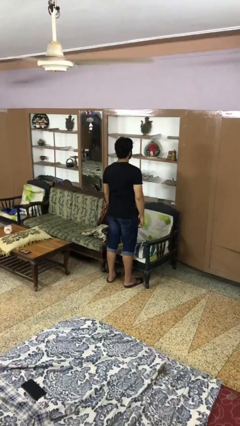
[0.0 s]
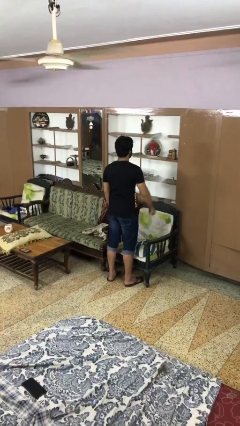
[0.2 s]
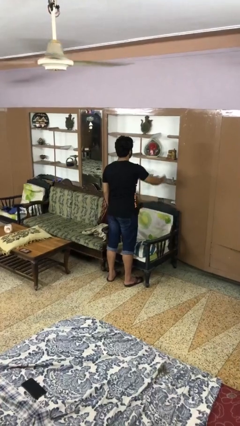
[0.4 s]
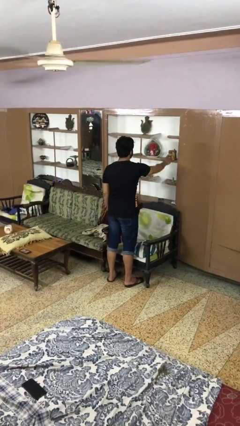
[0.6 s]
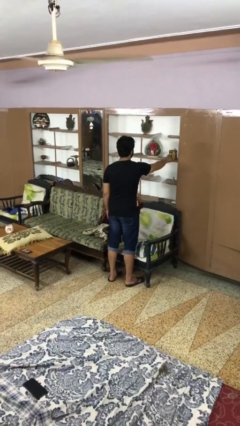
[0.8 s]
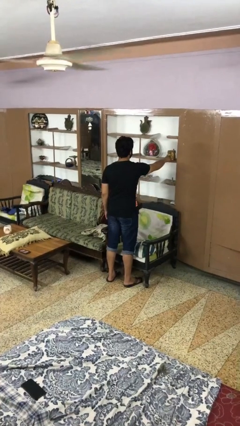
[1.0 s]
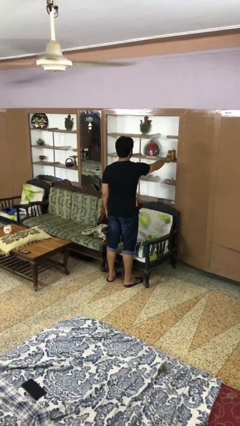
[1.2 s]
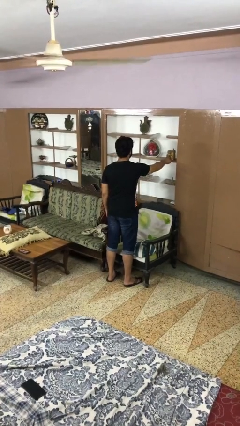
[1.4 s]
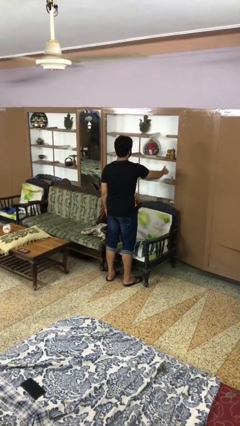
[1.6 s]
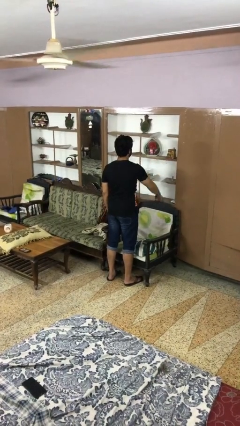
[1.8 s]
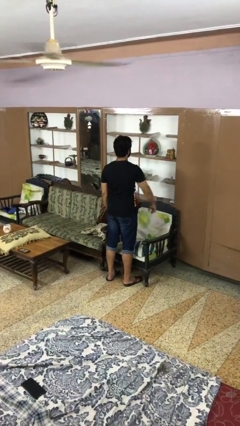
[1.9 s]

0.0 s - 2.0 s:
person taps object with finger

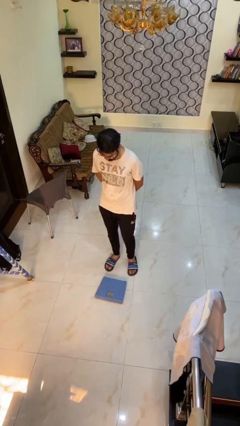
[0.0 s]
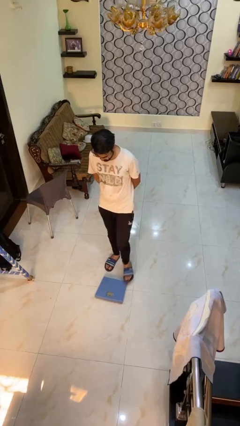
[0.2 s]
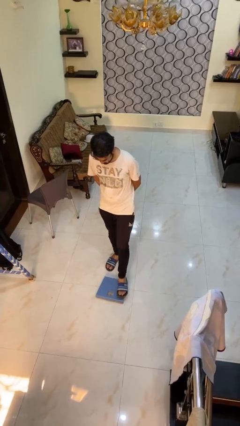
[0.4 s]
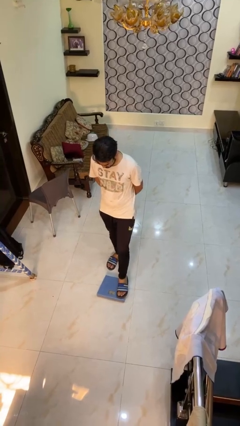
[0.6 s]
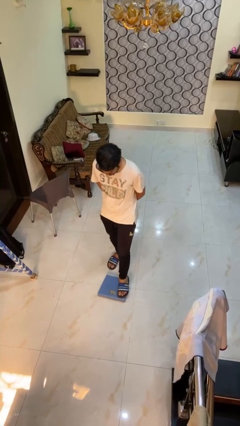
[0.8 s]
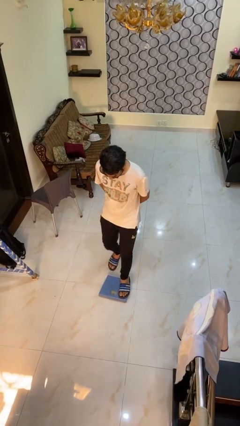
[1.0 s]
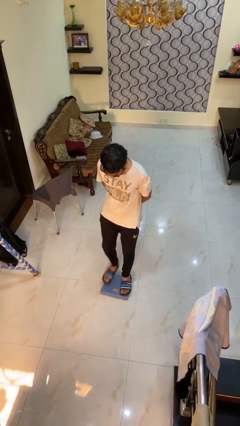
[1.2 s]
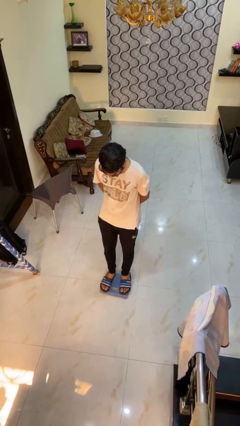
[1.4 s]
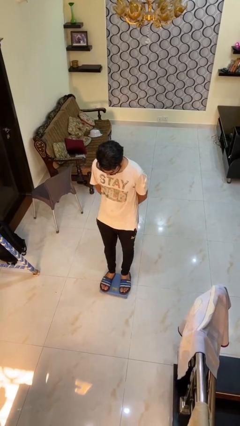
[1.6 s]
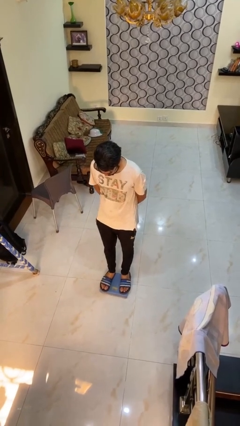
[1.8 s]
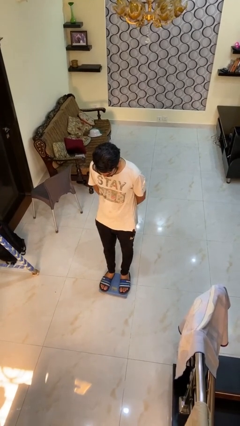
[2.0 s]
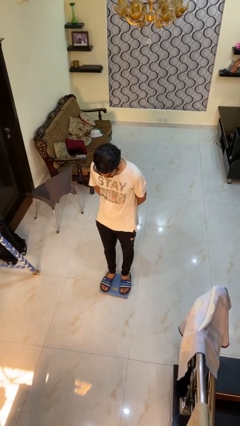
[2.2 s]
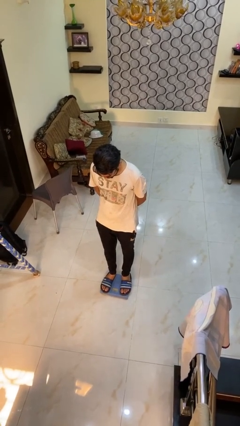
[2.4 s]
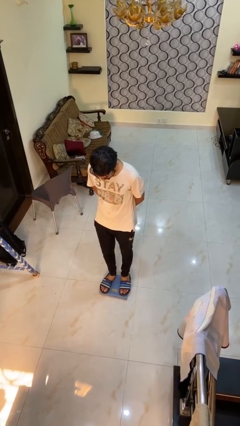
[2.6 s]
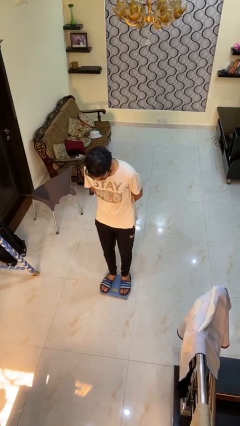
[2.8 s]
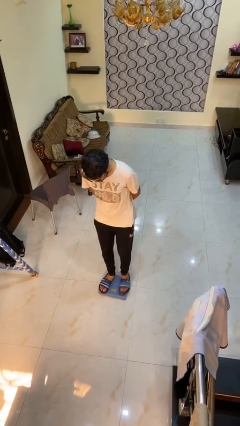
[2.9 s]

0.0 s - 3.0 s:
person uses bodyweight scale

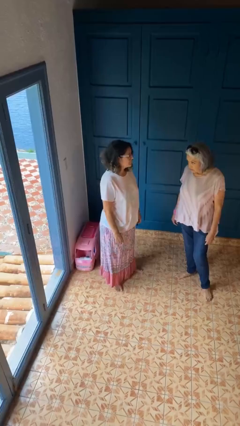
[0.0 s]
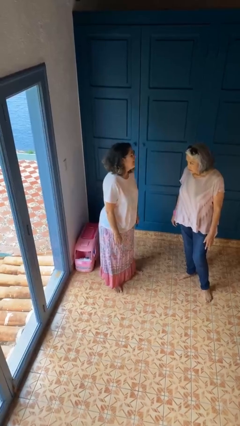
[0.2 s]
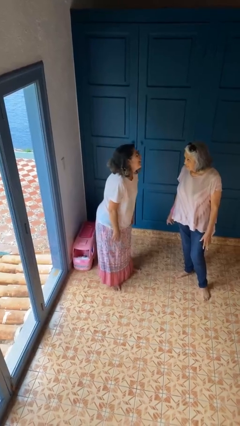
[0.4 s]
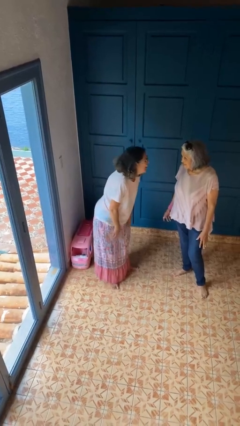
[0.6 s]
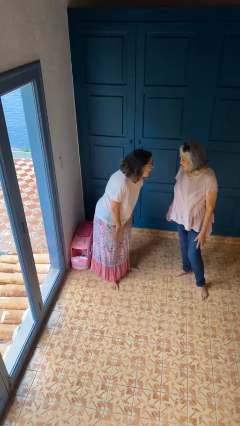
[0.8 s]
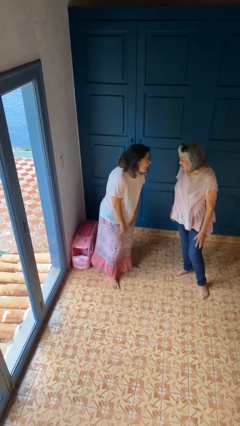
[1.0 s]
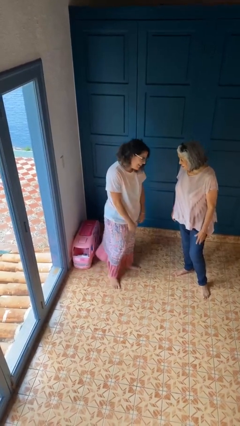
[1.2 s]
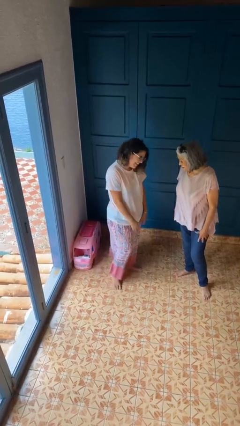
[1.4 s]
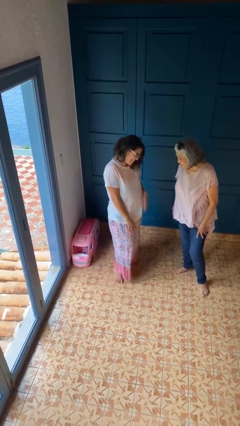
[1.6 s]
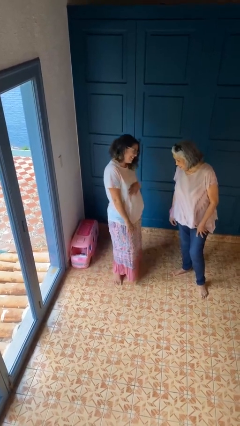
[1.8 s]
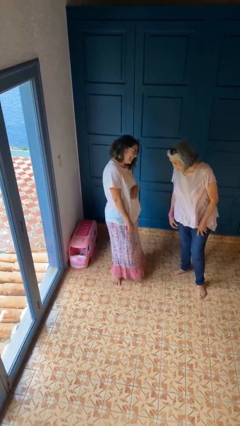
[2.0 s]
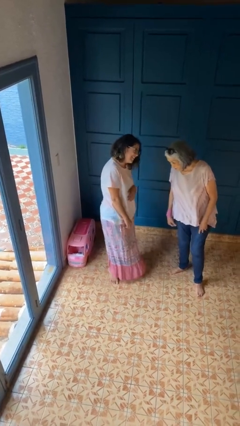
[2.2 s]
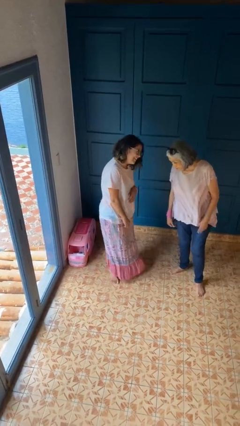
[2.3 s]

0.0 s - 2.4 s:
person laughs with person

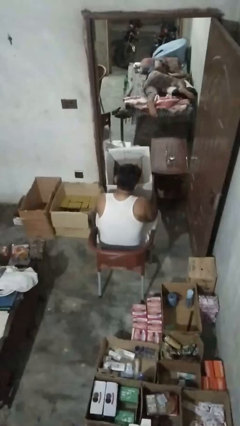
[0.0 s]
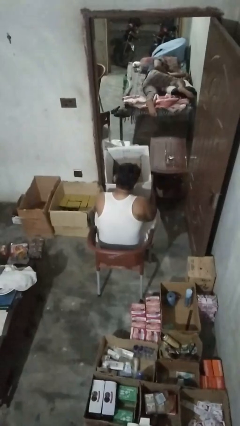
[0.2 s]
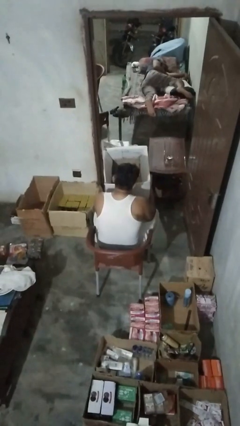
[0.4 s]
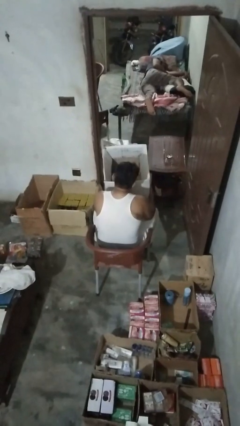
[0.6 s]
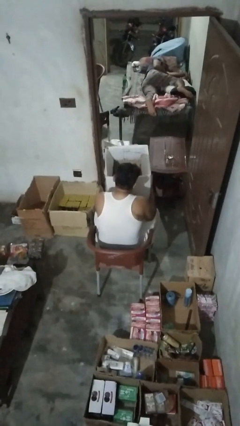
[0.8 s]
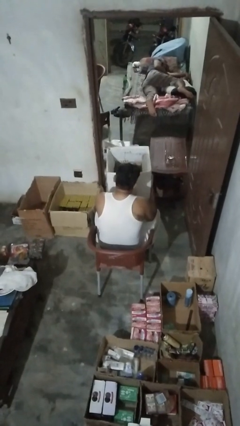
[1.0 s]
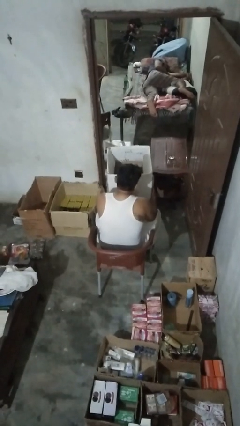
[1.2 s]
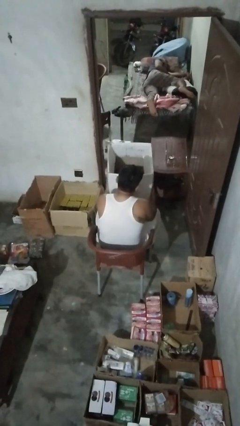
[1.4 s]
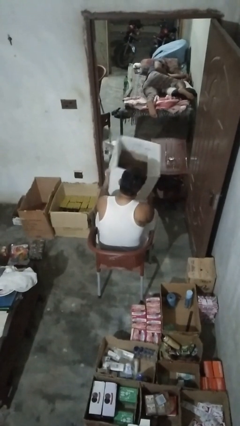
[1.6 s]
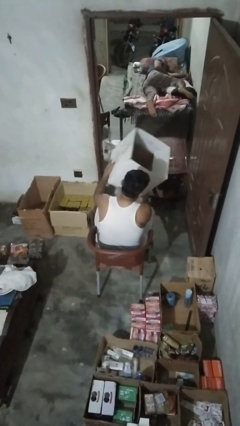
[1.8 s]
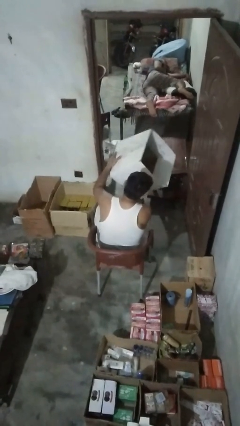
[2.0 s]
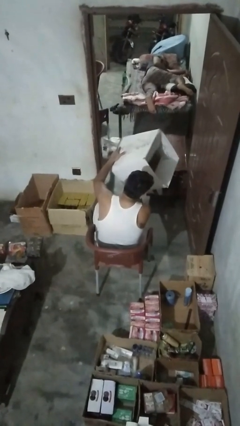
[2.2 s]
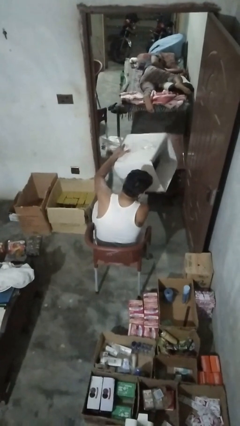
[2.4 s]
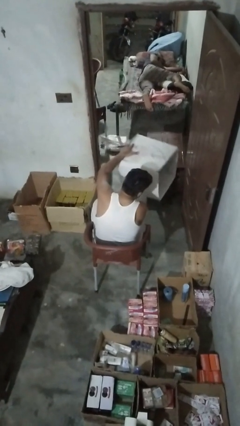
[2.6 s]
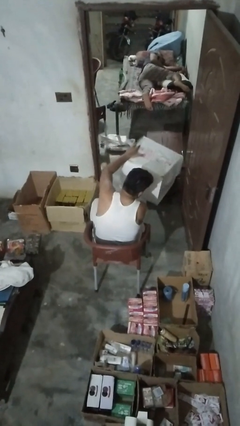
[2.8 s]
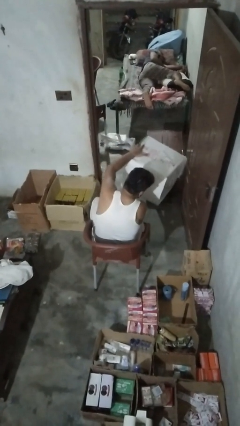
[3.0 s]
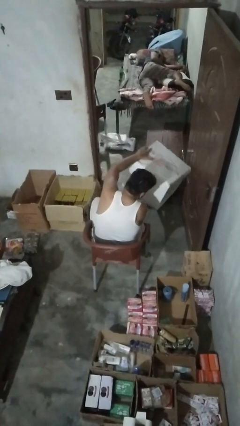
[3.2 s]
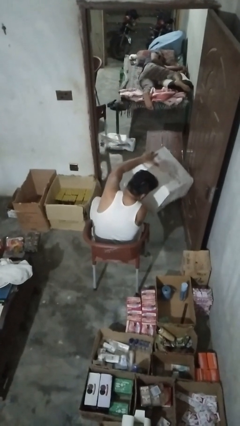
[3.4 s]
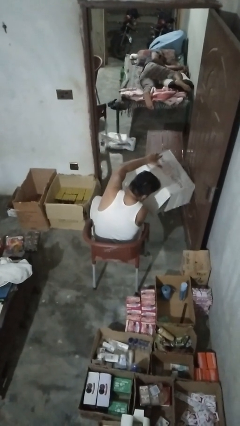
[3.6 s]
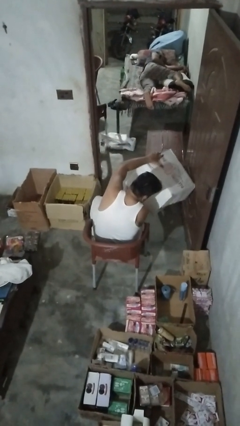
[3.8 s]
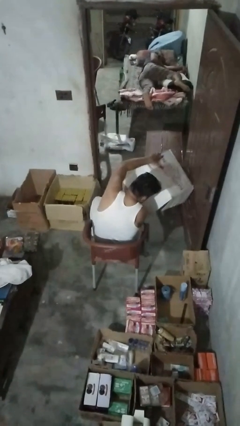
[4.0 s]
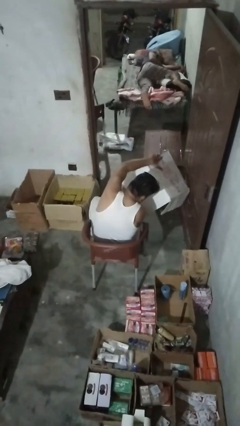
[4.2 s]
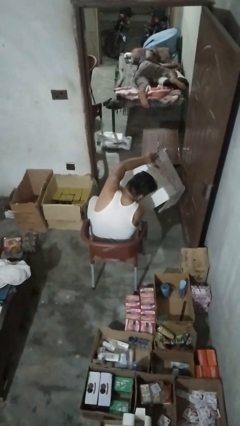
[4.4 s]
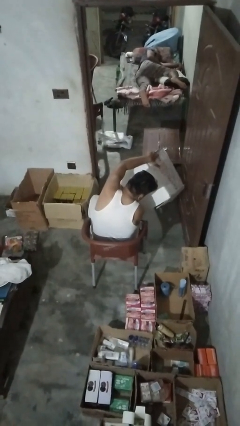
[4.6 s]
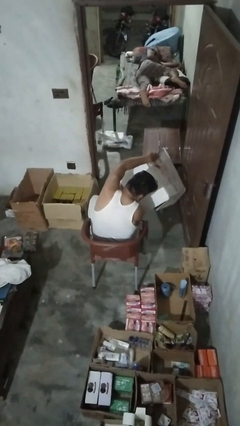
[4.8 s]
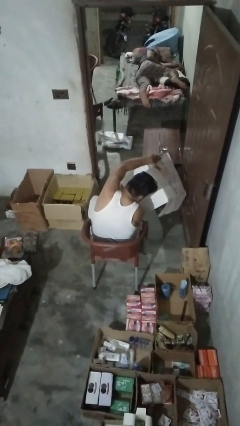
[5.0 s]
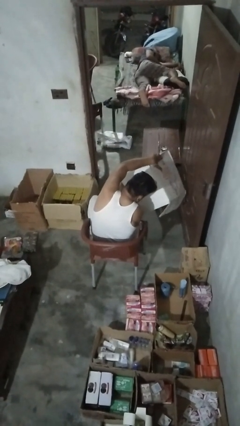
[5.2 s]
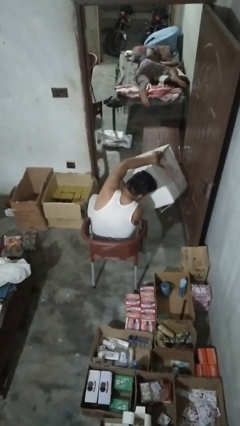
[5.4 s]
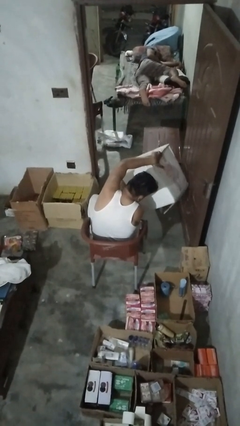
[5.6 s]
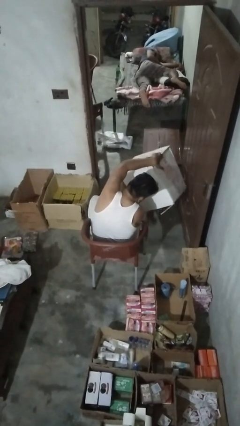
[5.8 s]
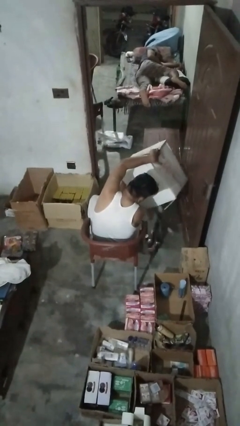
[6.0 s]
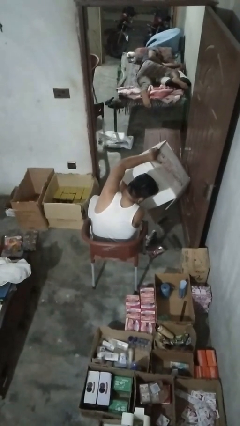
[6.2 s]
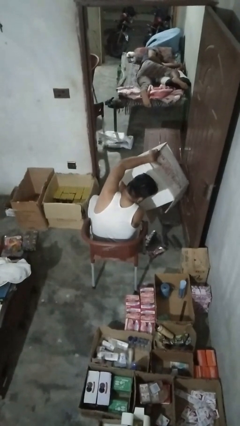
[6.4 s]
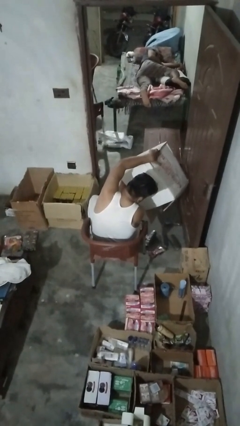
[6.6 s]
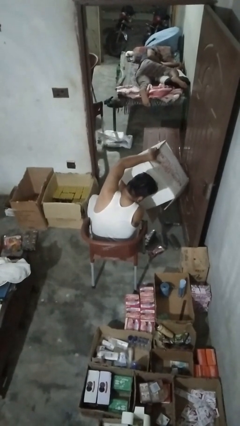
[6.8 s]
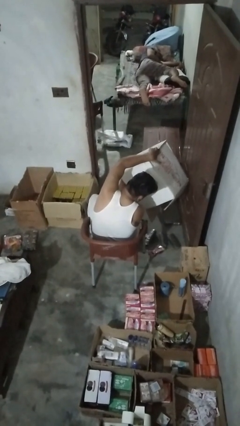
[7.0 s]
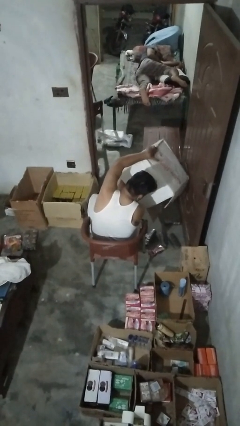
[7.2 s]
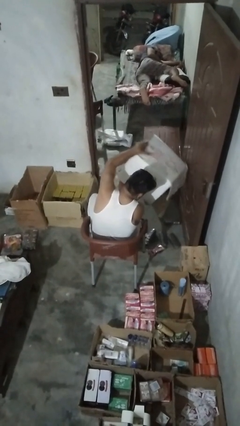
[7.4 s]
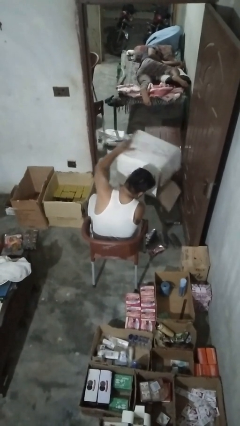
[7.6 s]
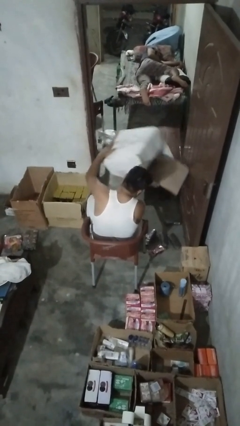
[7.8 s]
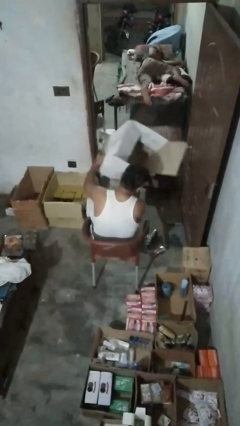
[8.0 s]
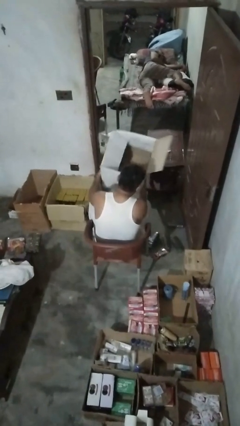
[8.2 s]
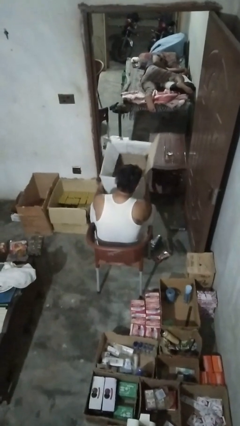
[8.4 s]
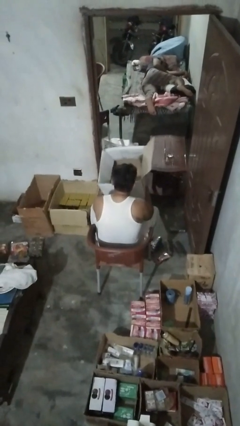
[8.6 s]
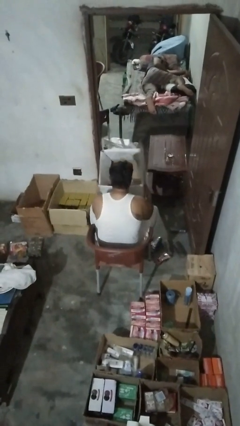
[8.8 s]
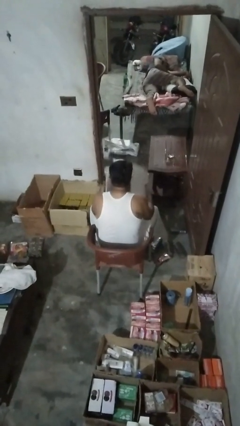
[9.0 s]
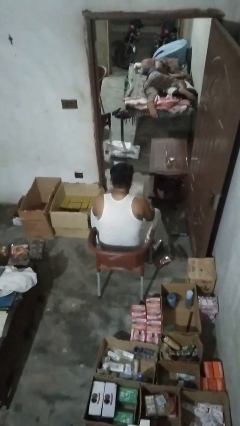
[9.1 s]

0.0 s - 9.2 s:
person unloads box onto floor

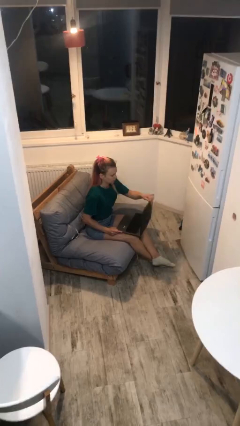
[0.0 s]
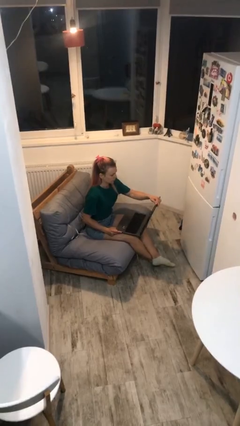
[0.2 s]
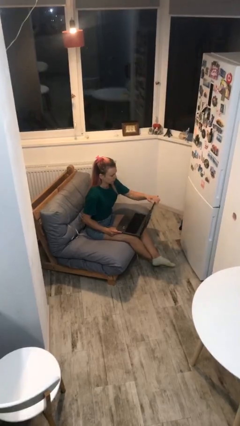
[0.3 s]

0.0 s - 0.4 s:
person opens laptop

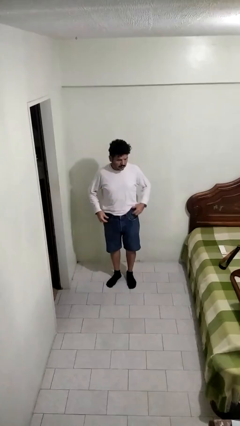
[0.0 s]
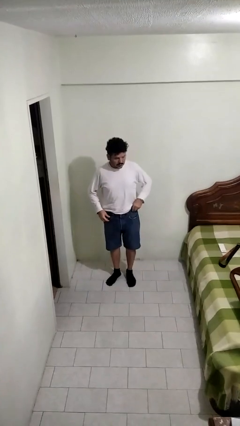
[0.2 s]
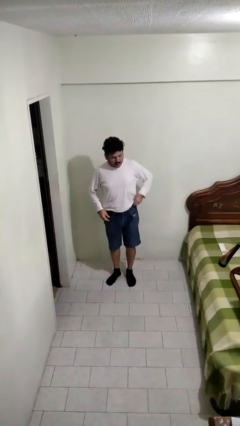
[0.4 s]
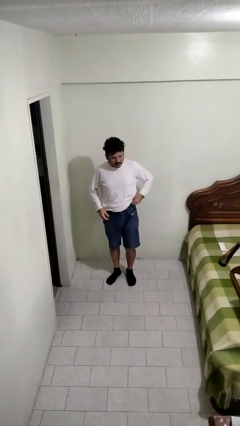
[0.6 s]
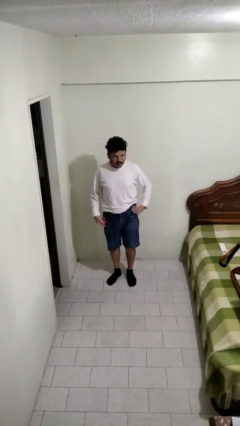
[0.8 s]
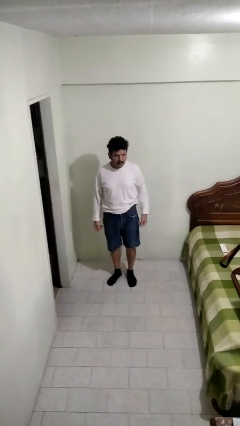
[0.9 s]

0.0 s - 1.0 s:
person hikes up pants
